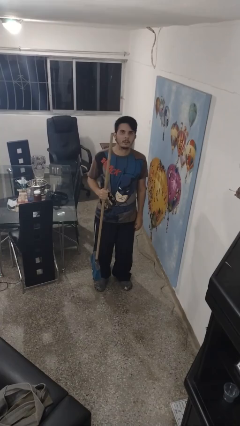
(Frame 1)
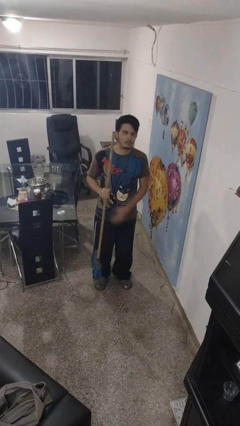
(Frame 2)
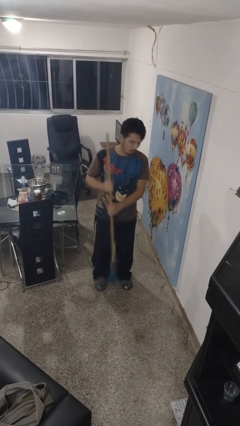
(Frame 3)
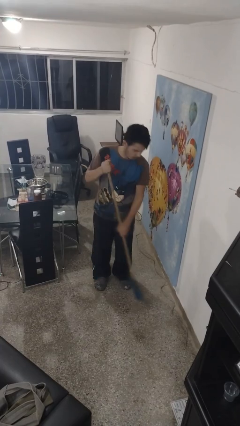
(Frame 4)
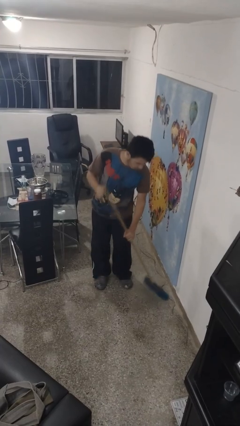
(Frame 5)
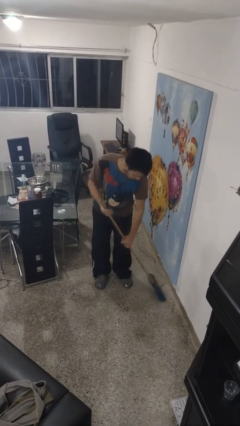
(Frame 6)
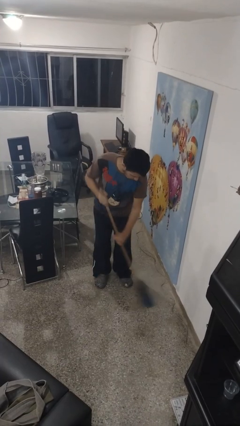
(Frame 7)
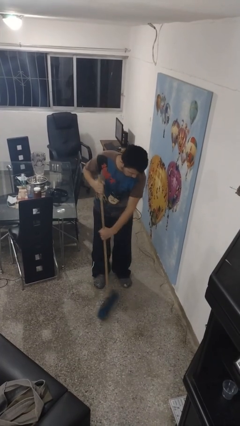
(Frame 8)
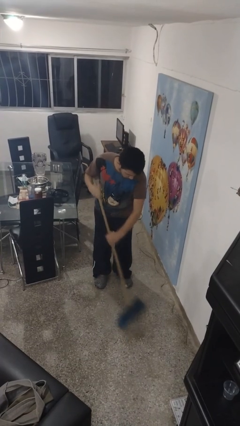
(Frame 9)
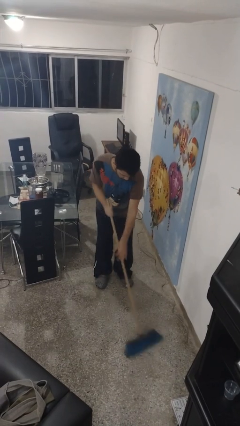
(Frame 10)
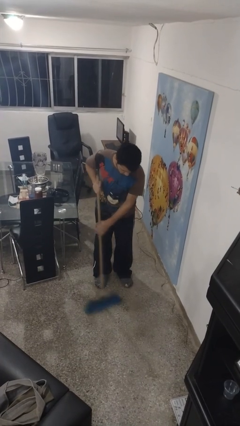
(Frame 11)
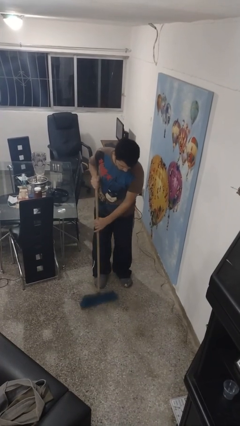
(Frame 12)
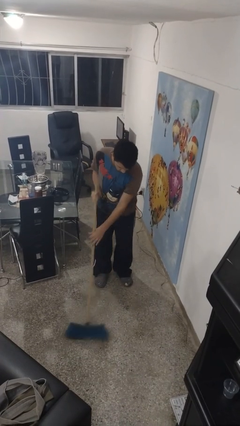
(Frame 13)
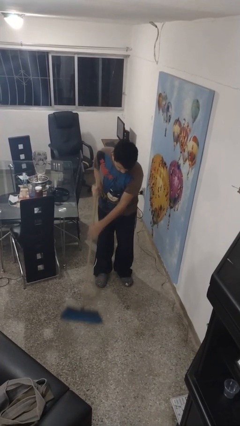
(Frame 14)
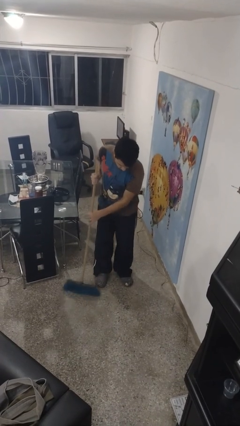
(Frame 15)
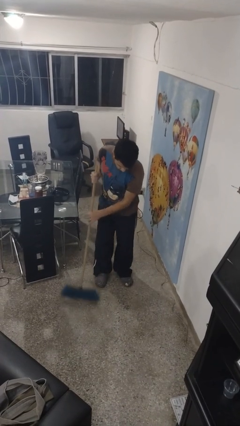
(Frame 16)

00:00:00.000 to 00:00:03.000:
person sweeps floor

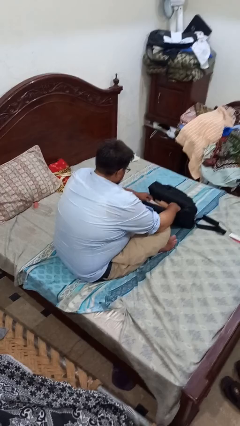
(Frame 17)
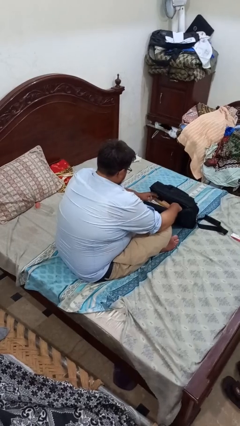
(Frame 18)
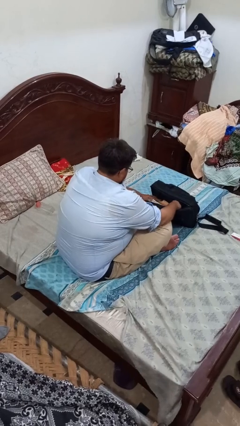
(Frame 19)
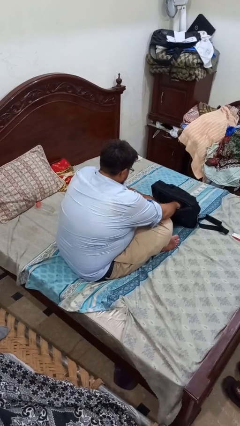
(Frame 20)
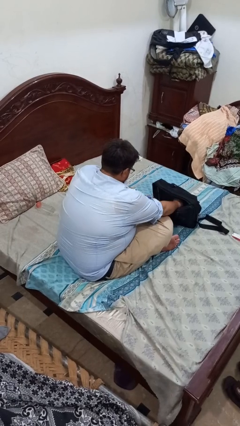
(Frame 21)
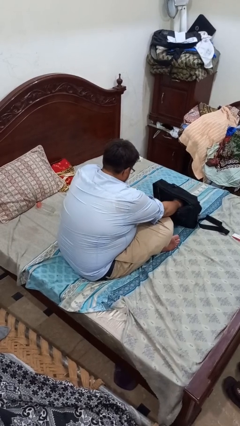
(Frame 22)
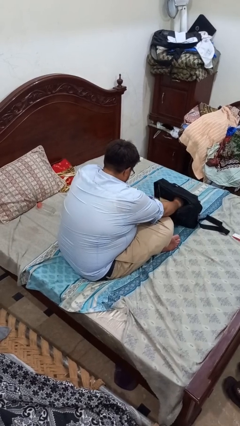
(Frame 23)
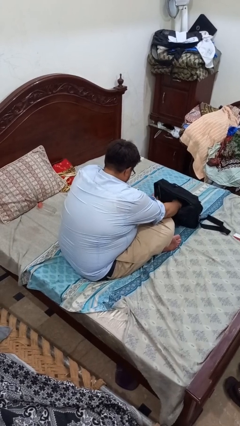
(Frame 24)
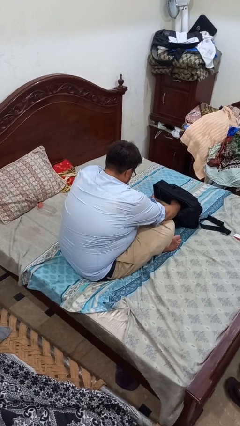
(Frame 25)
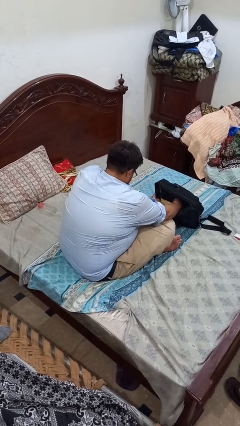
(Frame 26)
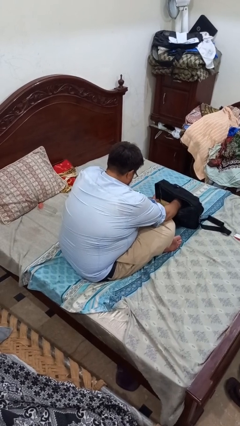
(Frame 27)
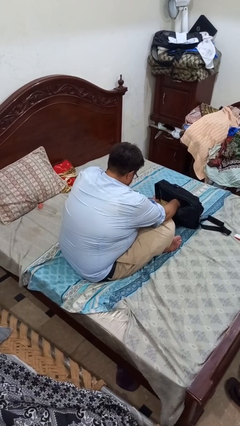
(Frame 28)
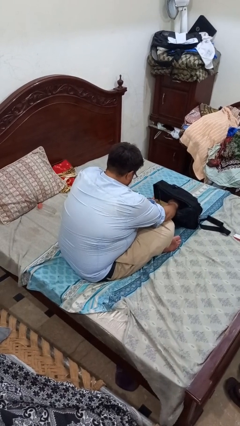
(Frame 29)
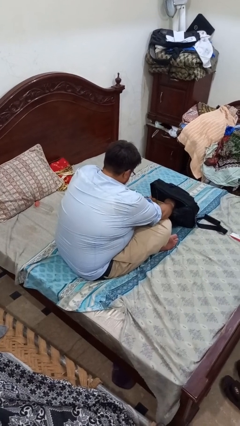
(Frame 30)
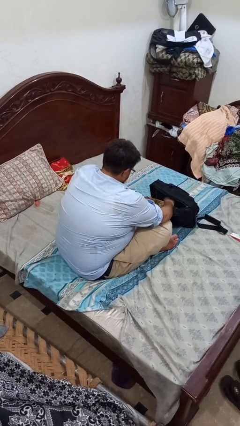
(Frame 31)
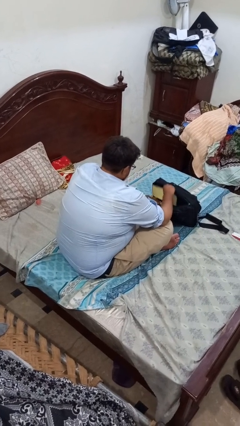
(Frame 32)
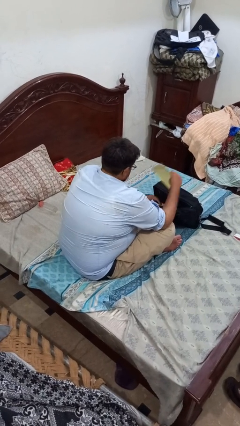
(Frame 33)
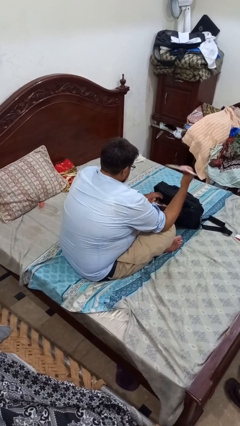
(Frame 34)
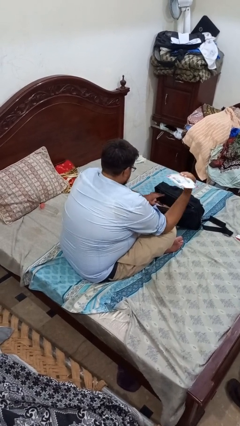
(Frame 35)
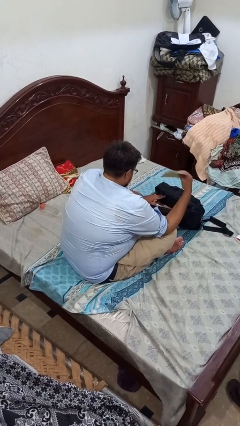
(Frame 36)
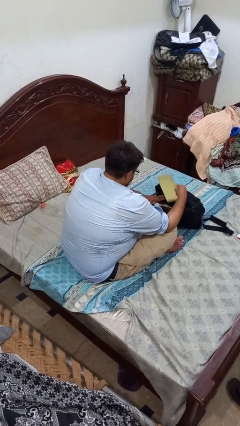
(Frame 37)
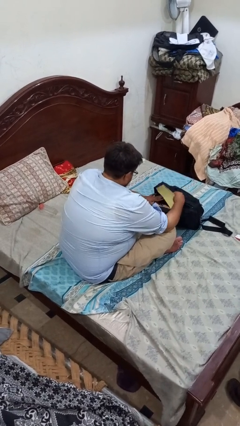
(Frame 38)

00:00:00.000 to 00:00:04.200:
person searches in bag

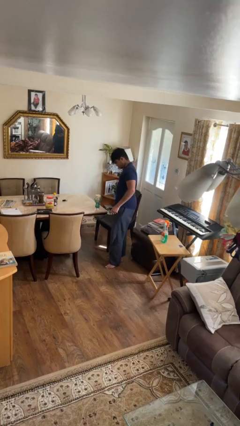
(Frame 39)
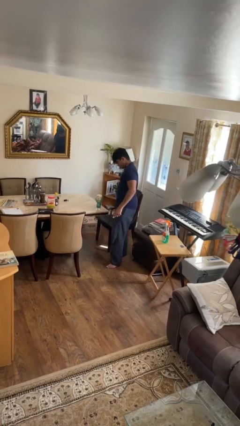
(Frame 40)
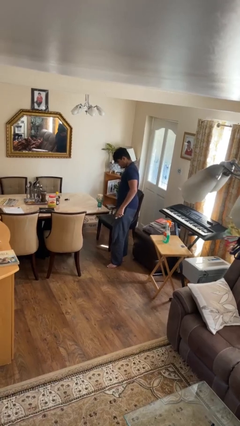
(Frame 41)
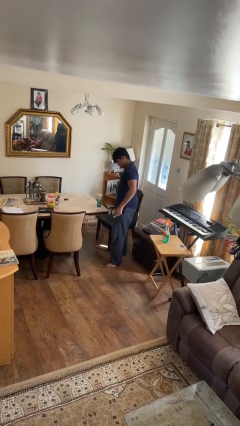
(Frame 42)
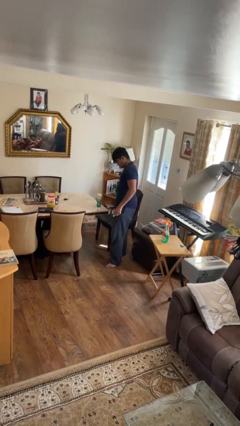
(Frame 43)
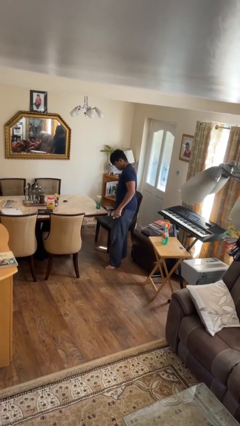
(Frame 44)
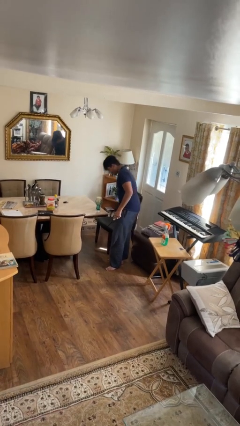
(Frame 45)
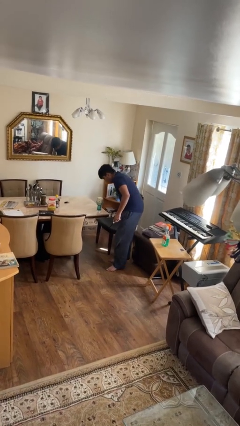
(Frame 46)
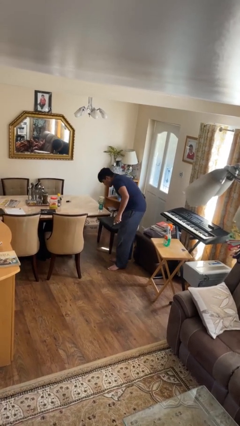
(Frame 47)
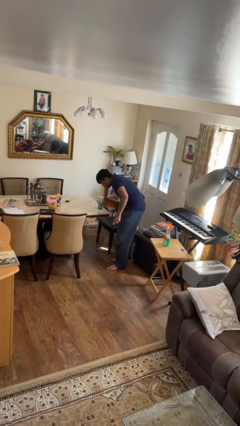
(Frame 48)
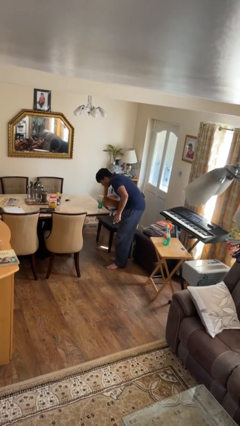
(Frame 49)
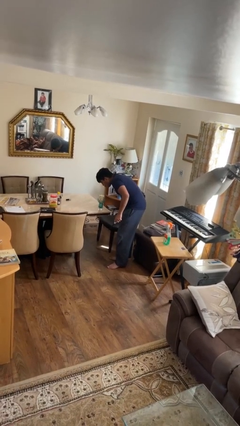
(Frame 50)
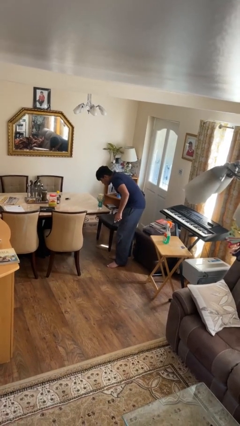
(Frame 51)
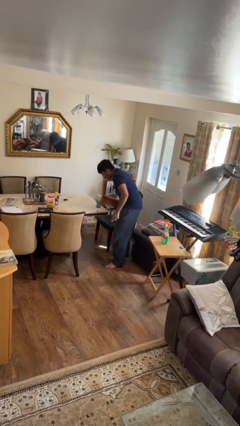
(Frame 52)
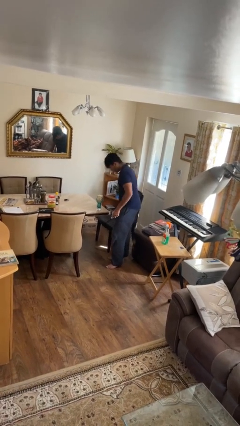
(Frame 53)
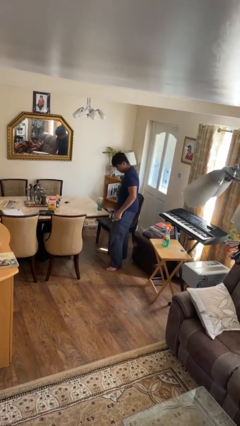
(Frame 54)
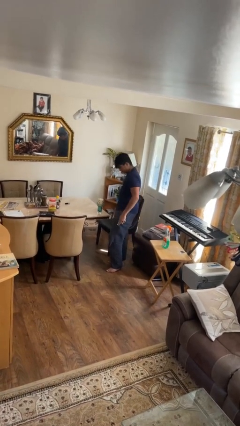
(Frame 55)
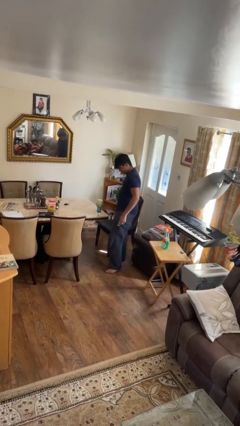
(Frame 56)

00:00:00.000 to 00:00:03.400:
person extinguishes candle

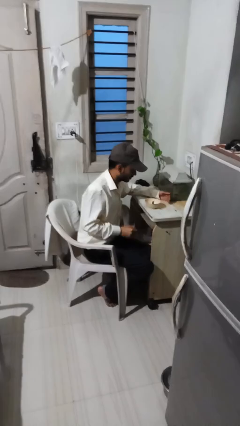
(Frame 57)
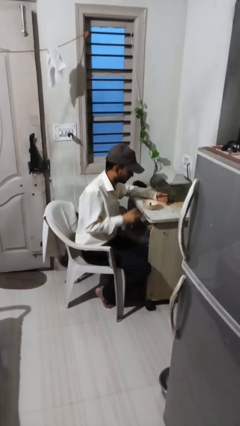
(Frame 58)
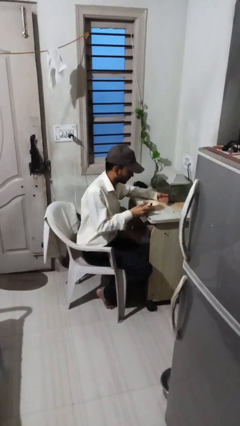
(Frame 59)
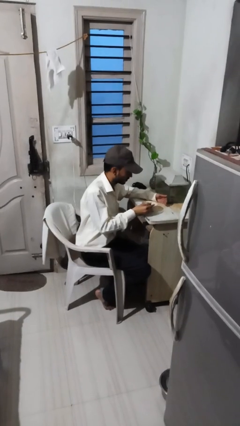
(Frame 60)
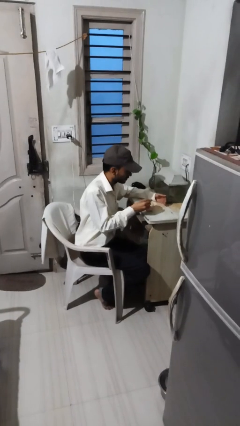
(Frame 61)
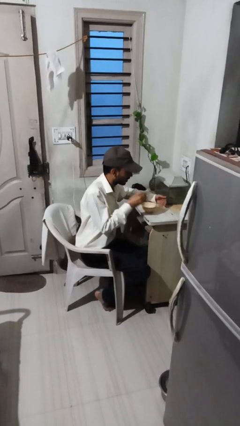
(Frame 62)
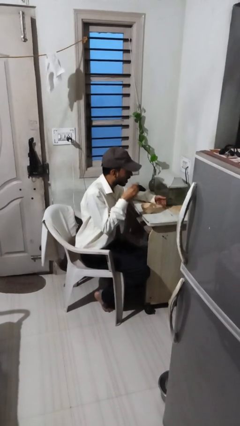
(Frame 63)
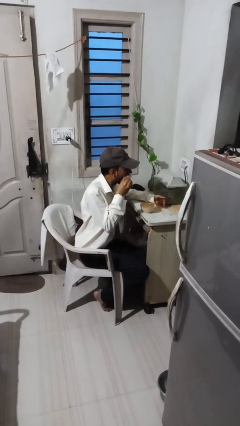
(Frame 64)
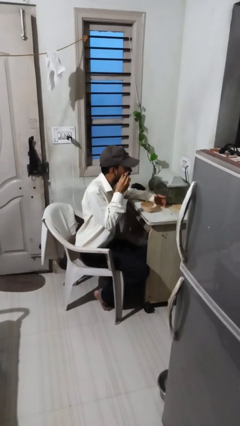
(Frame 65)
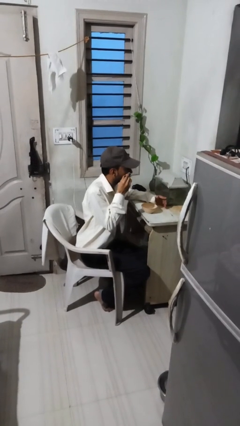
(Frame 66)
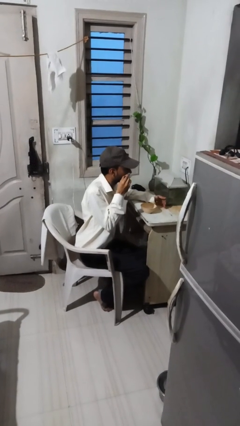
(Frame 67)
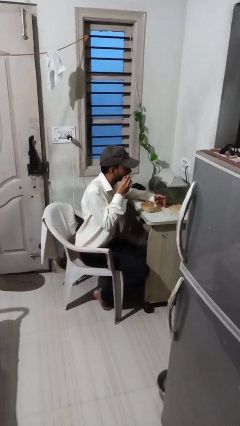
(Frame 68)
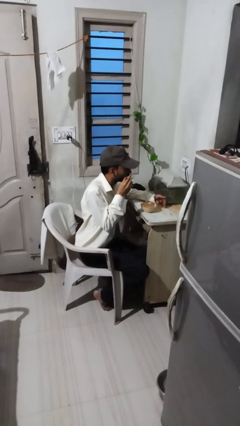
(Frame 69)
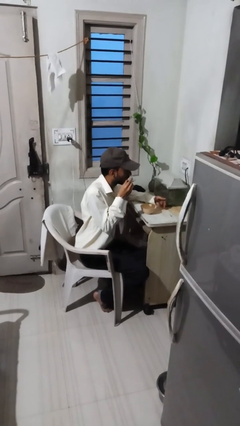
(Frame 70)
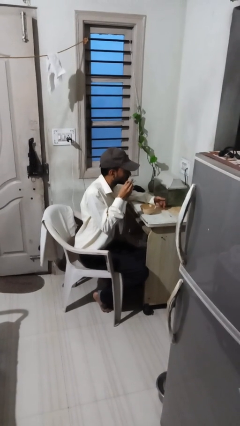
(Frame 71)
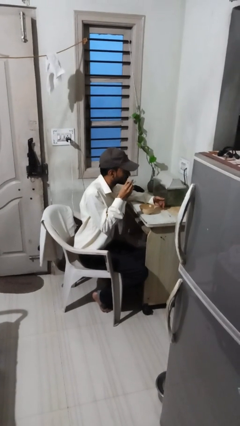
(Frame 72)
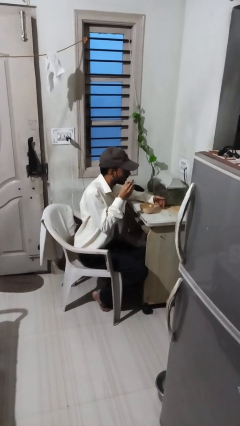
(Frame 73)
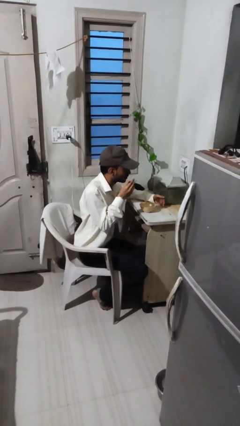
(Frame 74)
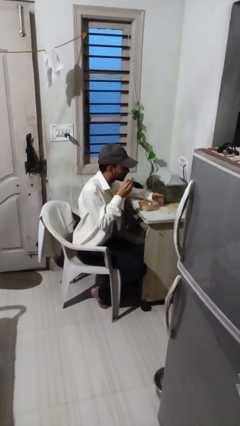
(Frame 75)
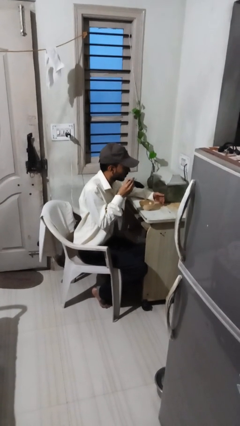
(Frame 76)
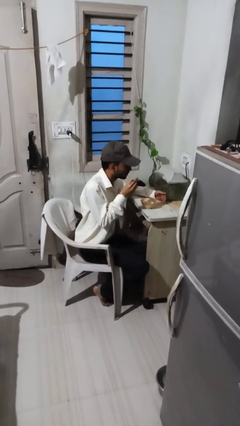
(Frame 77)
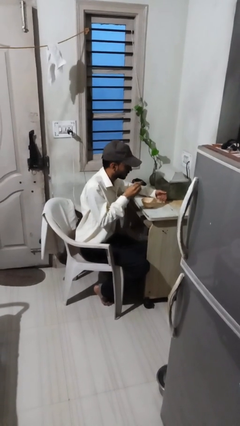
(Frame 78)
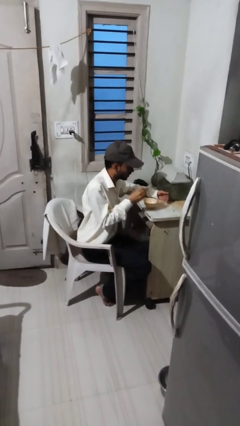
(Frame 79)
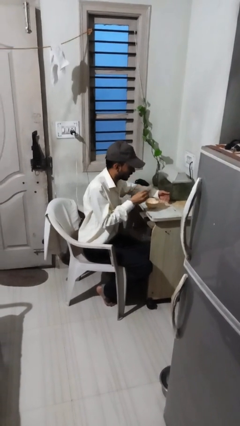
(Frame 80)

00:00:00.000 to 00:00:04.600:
person eats with utensil

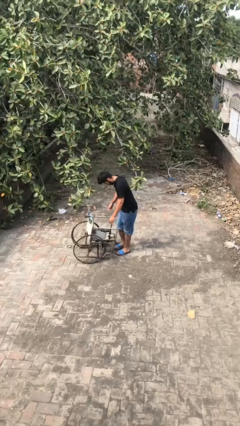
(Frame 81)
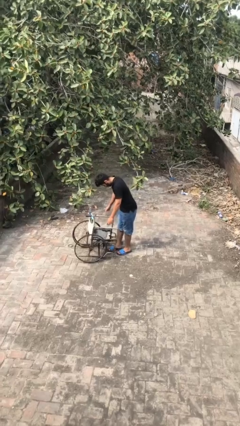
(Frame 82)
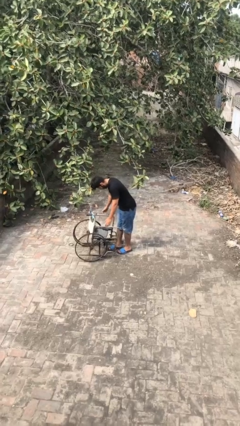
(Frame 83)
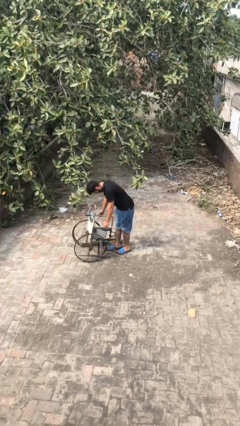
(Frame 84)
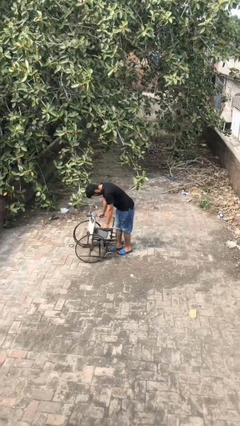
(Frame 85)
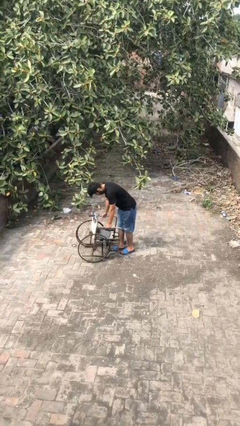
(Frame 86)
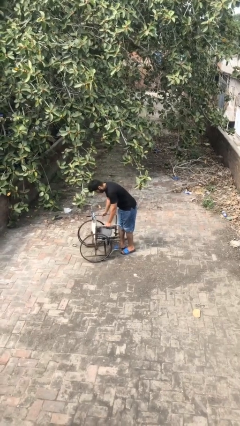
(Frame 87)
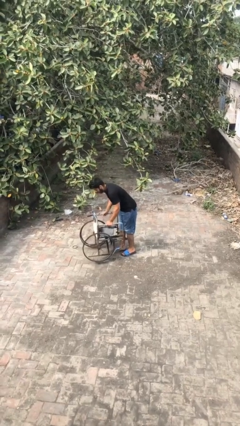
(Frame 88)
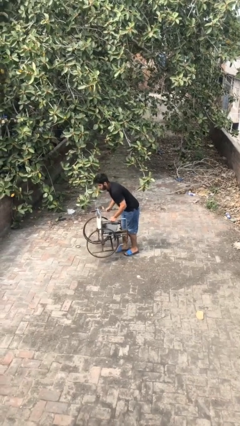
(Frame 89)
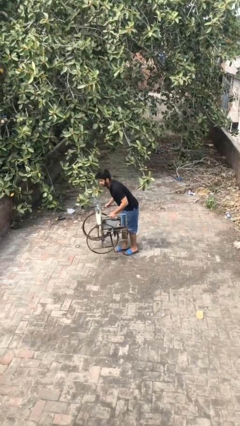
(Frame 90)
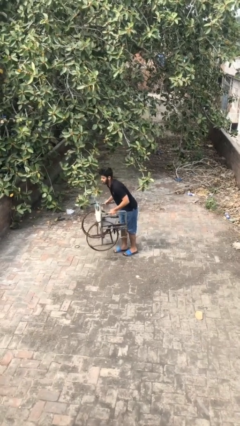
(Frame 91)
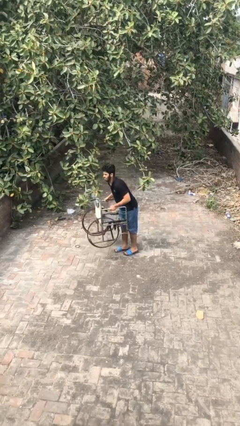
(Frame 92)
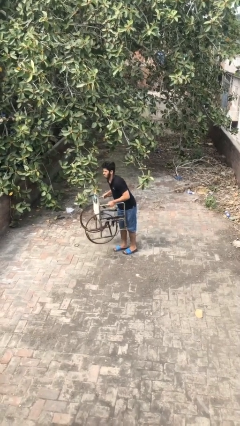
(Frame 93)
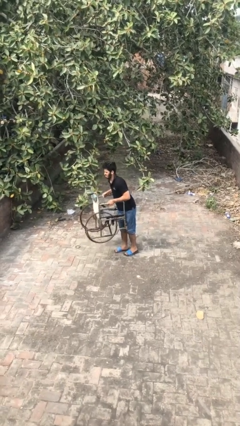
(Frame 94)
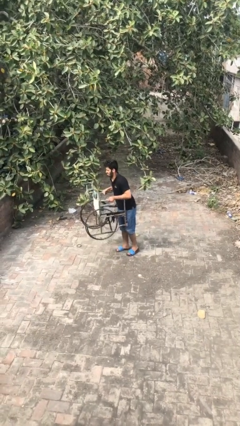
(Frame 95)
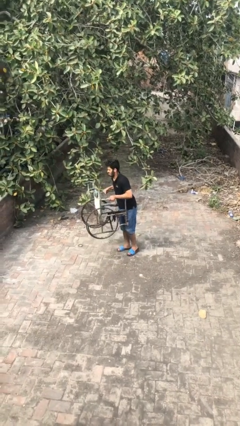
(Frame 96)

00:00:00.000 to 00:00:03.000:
person picks up object from floor
